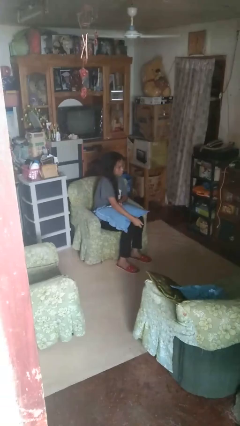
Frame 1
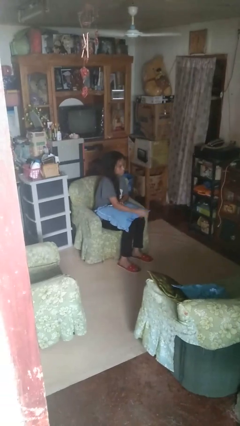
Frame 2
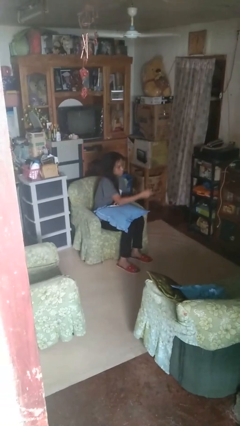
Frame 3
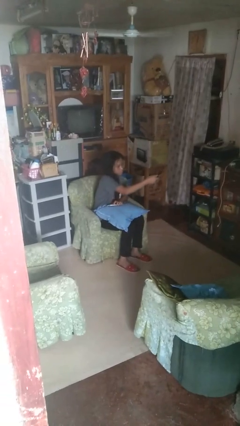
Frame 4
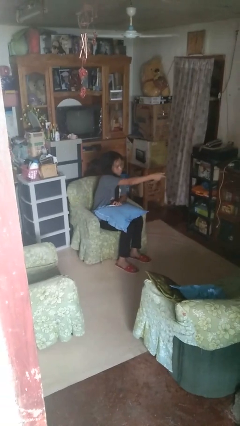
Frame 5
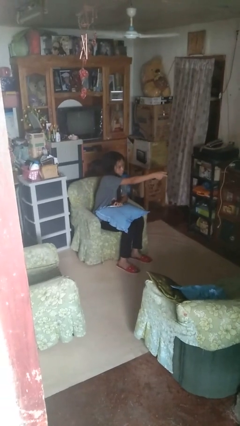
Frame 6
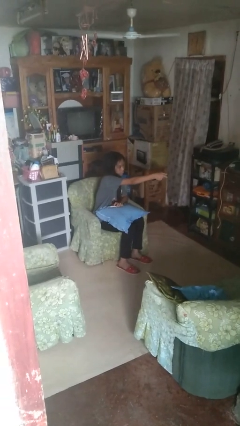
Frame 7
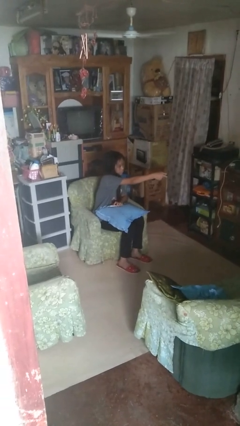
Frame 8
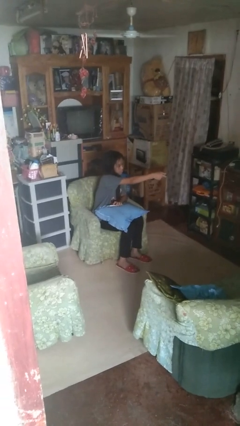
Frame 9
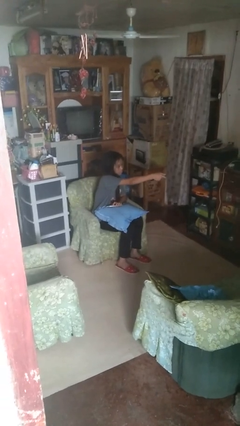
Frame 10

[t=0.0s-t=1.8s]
person uses television remote

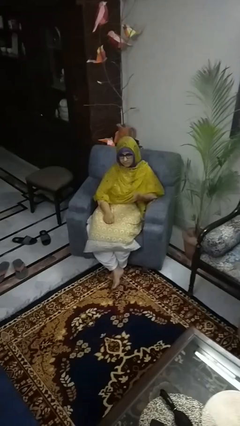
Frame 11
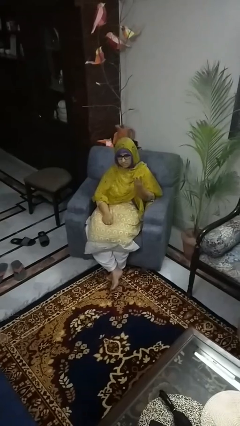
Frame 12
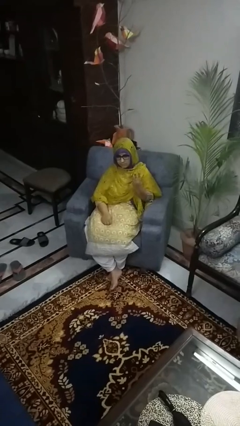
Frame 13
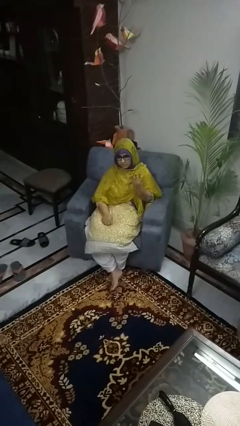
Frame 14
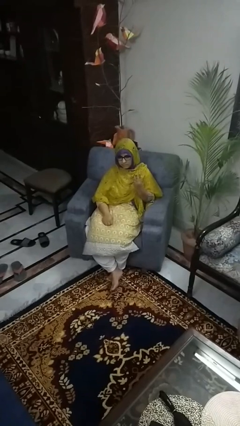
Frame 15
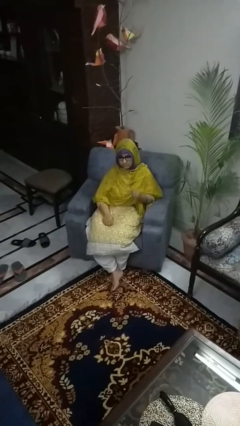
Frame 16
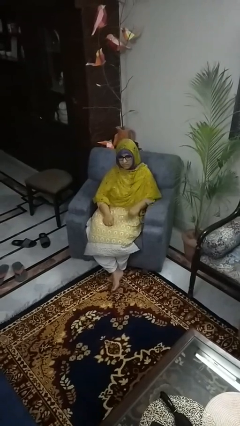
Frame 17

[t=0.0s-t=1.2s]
person gestures number three

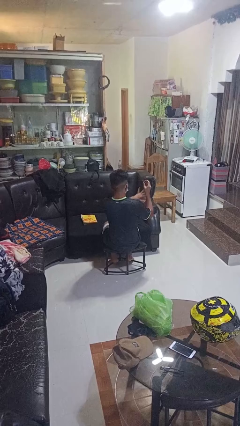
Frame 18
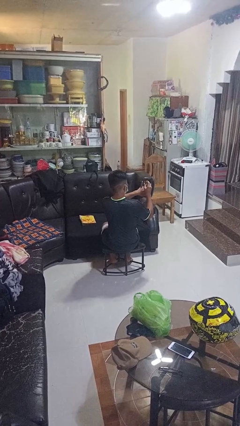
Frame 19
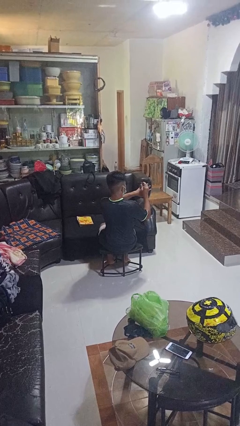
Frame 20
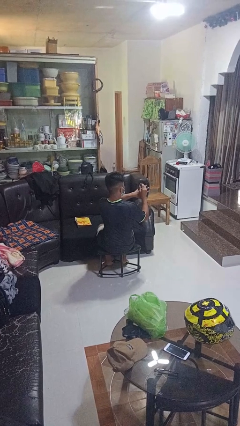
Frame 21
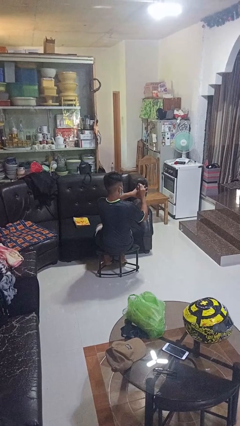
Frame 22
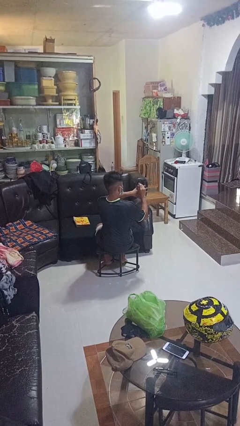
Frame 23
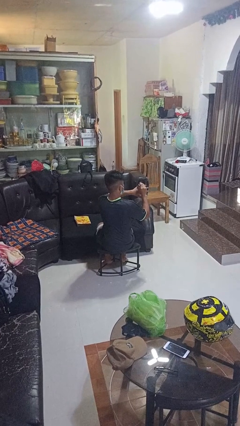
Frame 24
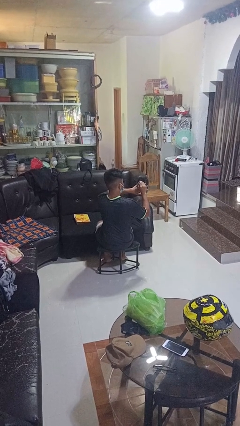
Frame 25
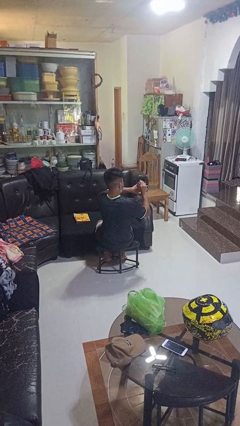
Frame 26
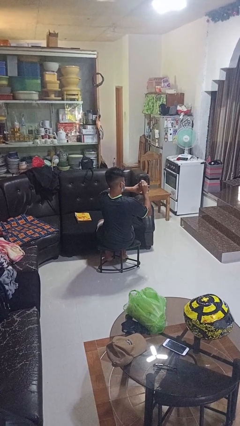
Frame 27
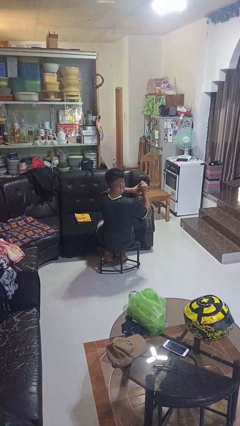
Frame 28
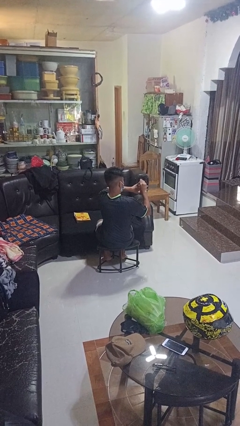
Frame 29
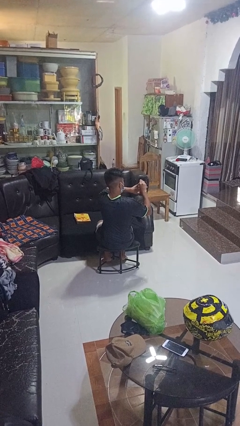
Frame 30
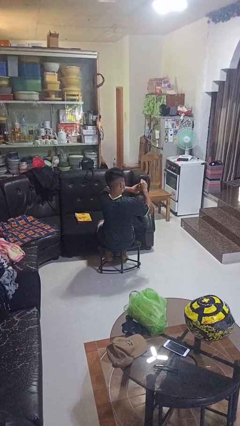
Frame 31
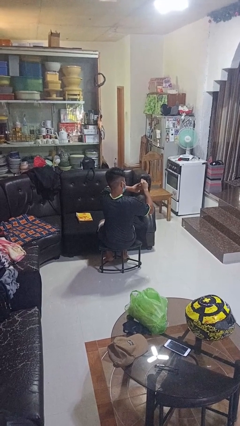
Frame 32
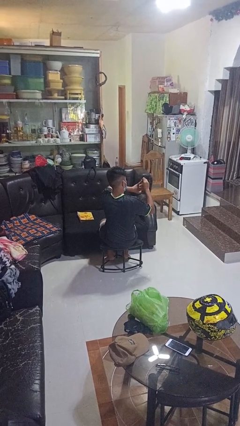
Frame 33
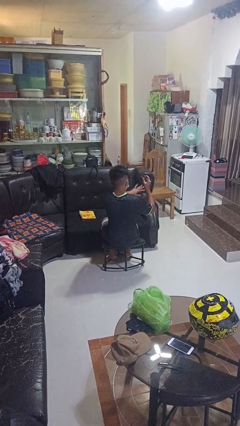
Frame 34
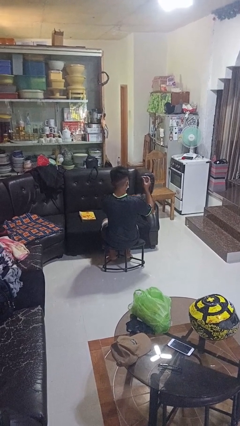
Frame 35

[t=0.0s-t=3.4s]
person clips fingernails

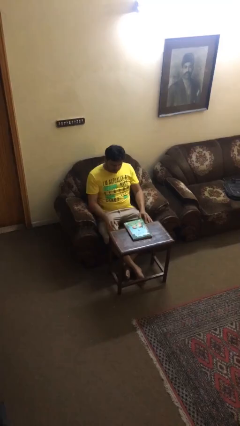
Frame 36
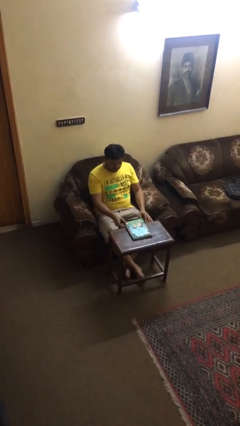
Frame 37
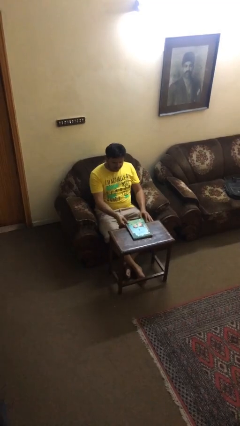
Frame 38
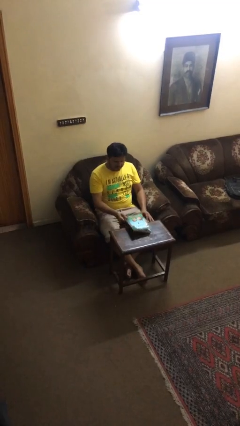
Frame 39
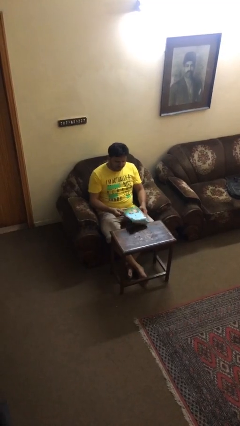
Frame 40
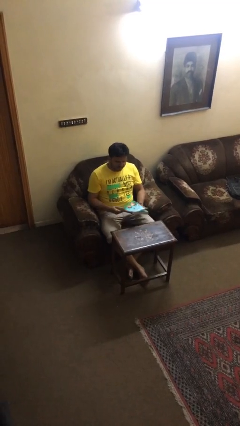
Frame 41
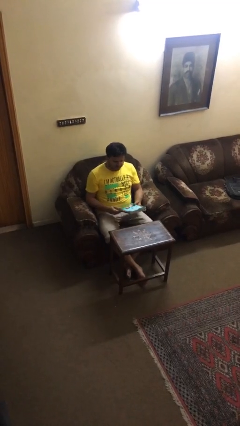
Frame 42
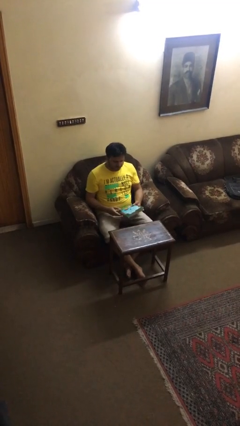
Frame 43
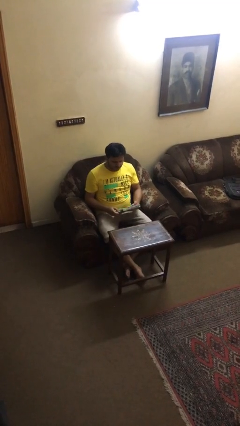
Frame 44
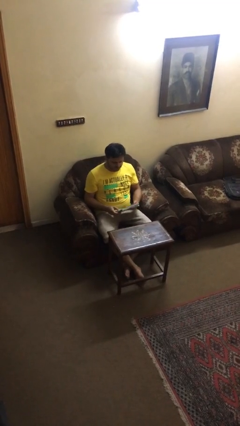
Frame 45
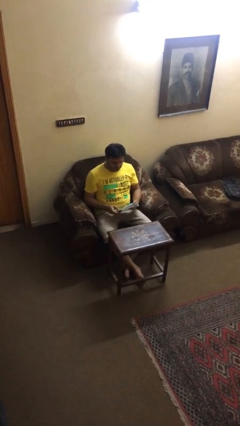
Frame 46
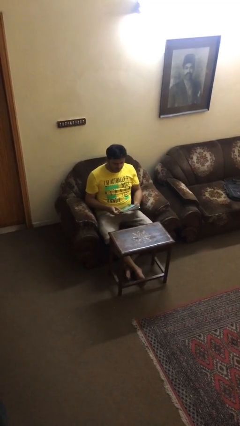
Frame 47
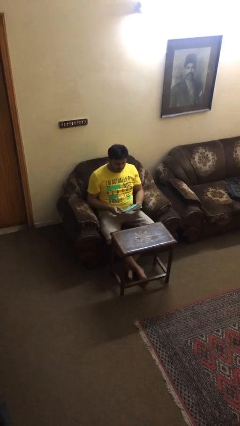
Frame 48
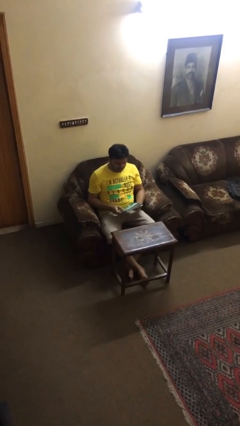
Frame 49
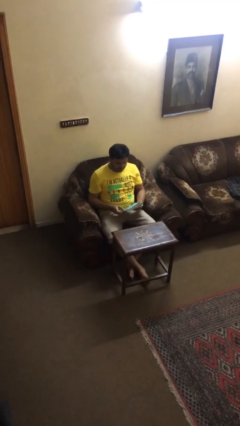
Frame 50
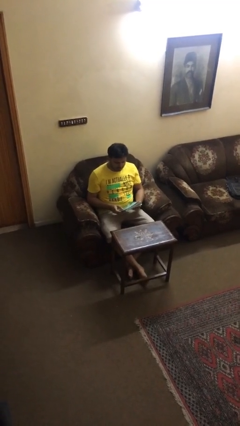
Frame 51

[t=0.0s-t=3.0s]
person picks up object from table

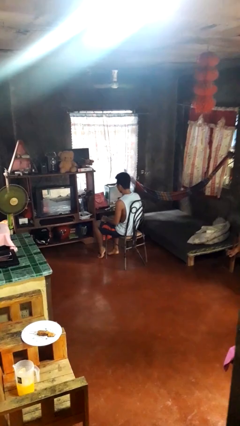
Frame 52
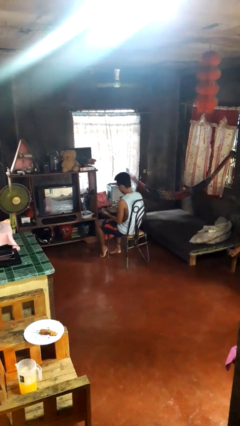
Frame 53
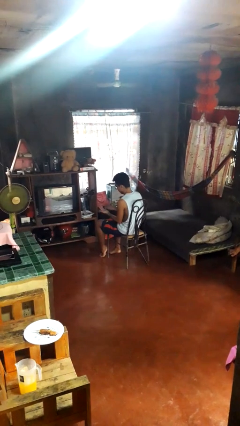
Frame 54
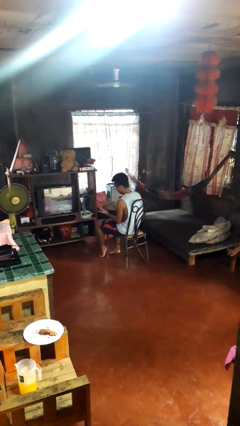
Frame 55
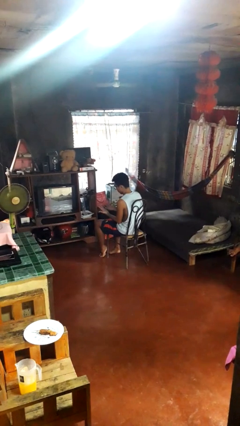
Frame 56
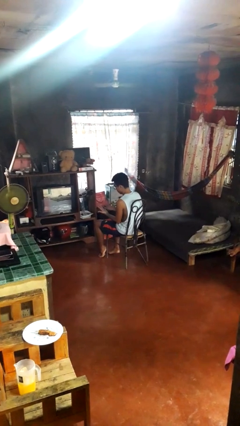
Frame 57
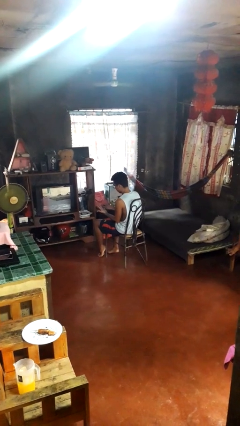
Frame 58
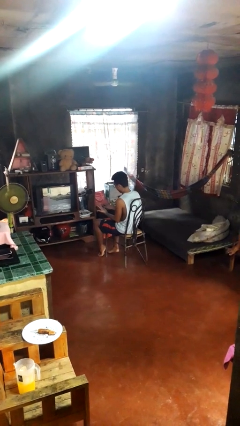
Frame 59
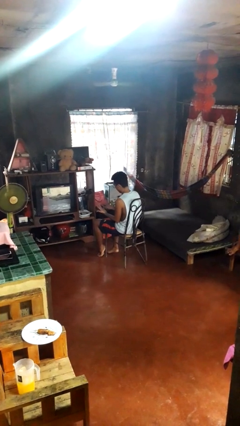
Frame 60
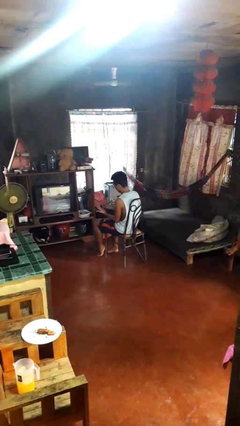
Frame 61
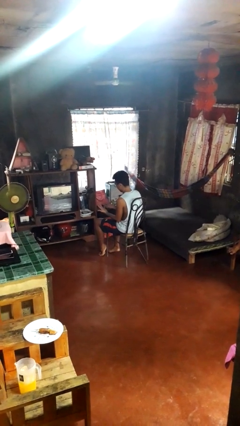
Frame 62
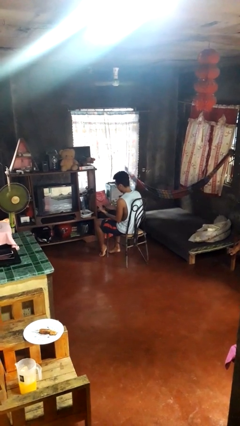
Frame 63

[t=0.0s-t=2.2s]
person looks at hands in lap

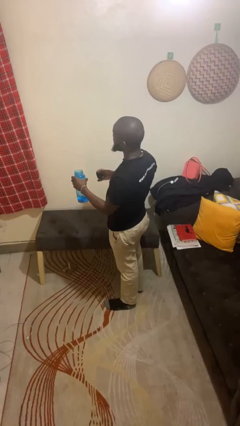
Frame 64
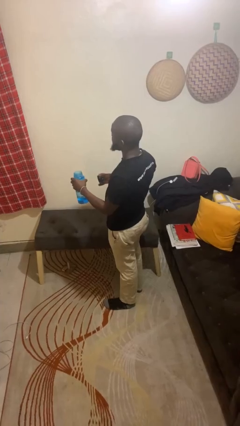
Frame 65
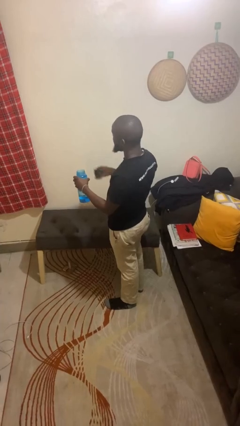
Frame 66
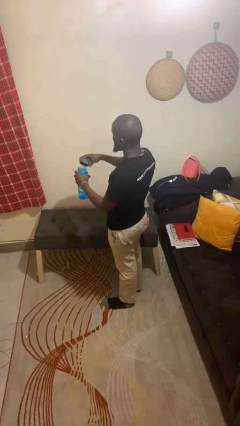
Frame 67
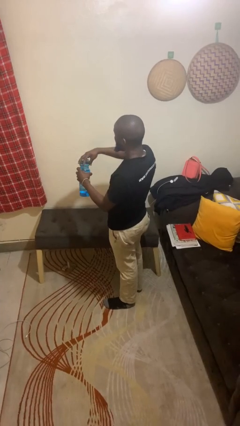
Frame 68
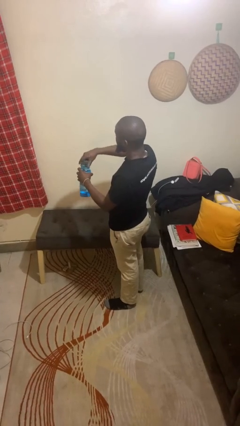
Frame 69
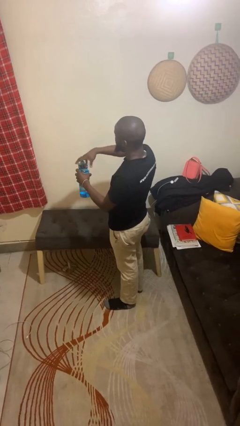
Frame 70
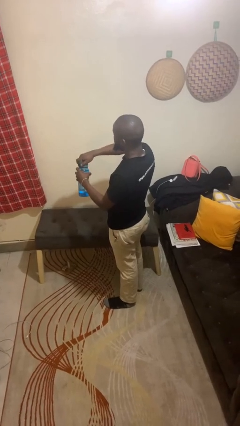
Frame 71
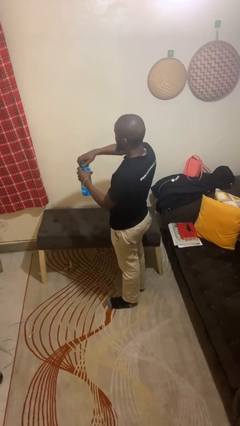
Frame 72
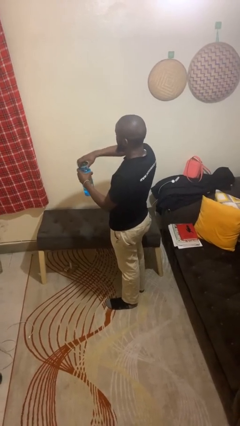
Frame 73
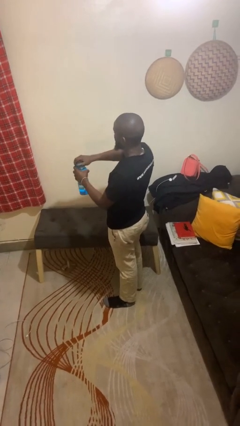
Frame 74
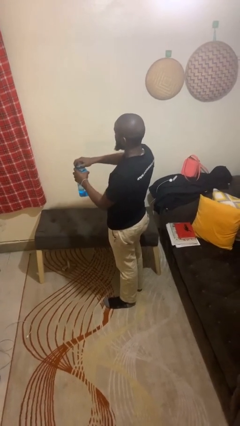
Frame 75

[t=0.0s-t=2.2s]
person closes jar

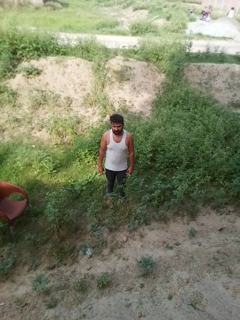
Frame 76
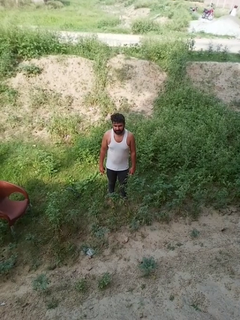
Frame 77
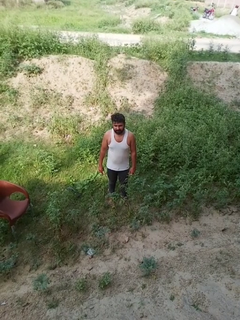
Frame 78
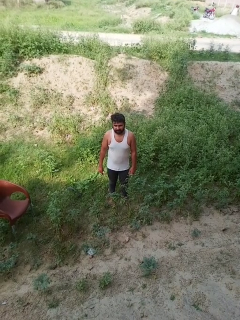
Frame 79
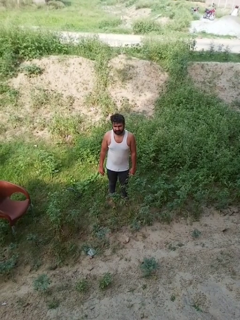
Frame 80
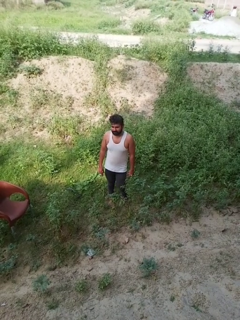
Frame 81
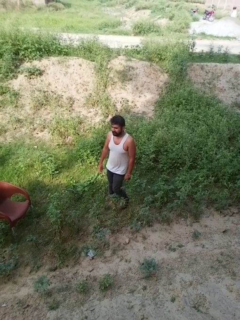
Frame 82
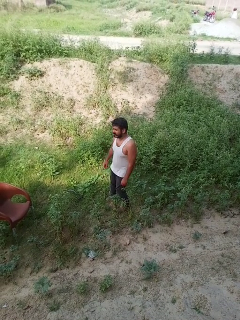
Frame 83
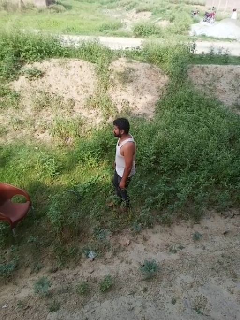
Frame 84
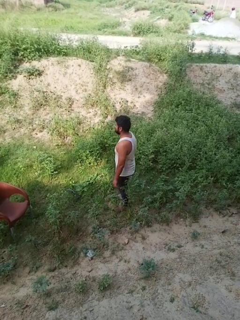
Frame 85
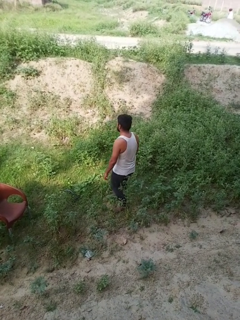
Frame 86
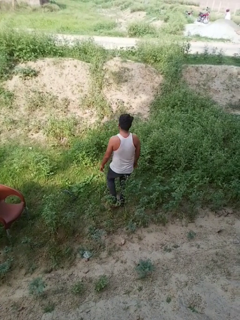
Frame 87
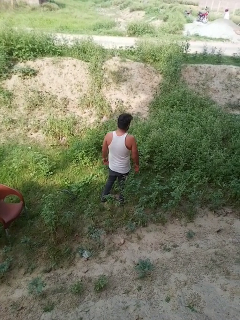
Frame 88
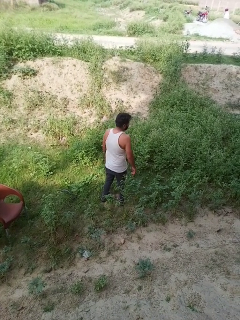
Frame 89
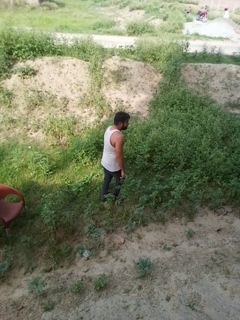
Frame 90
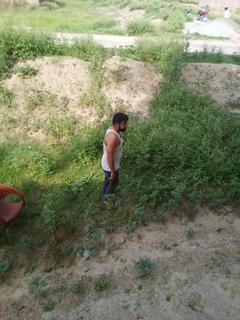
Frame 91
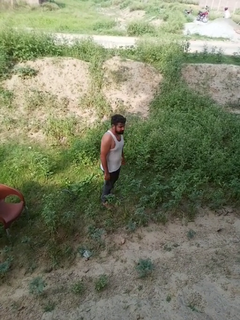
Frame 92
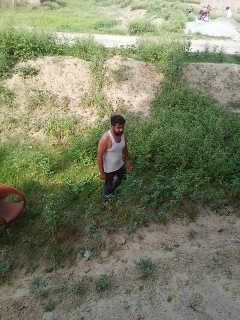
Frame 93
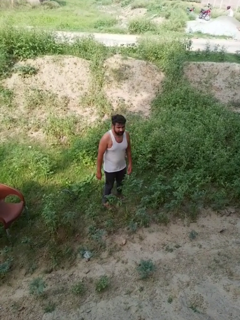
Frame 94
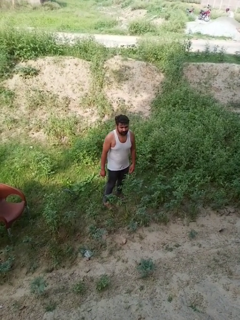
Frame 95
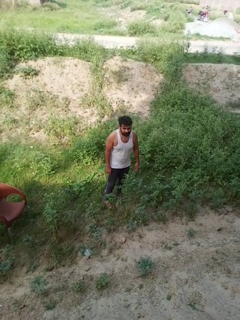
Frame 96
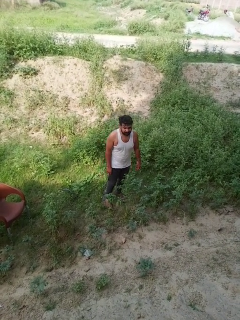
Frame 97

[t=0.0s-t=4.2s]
person twirls

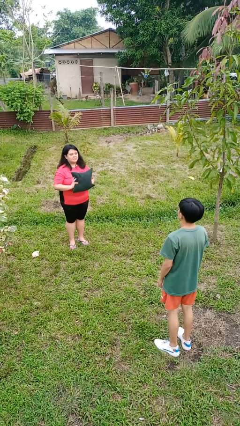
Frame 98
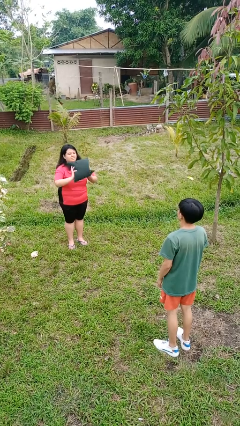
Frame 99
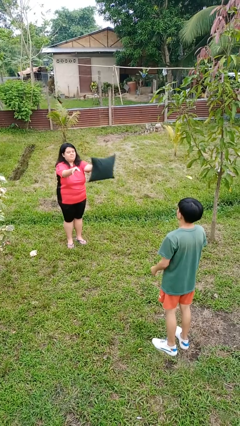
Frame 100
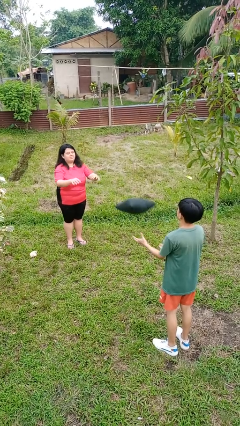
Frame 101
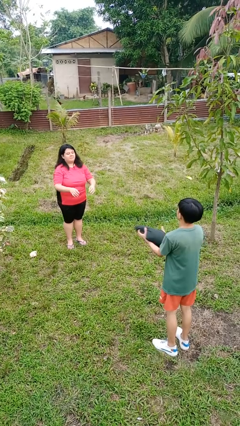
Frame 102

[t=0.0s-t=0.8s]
person throws object to person
